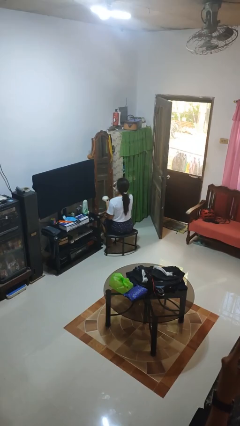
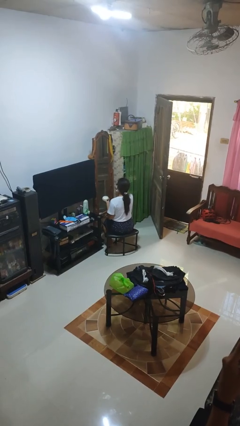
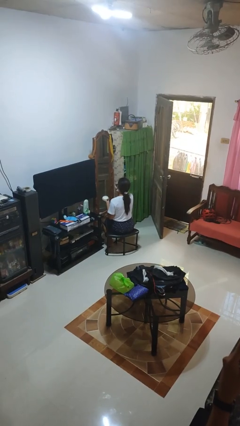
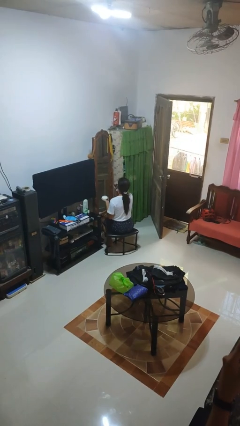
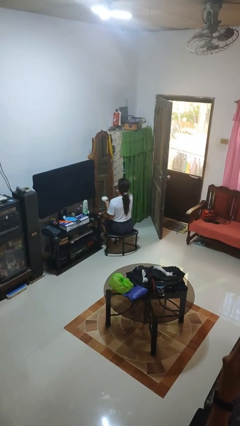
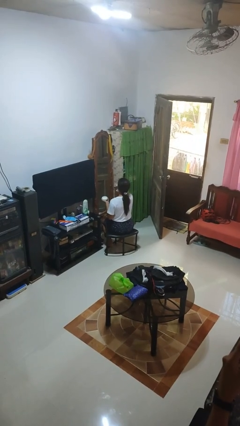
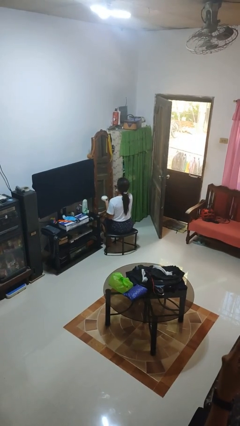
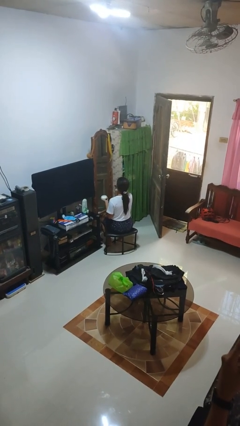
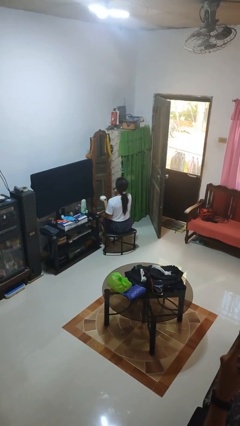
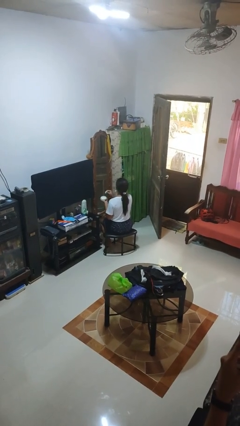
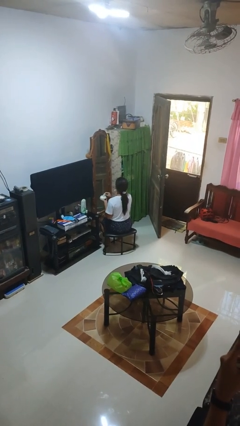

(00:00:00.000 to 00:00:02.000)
person applies foundation makeup

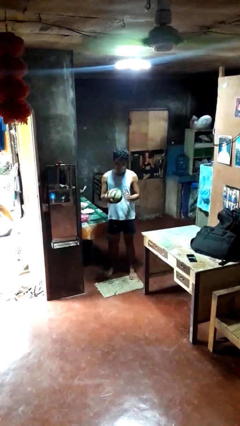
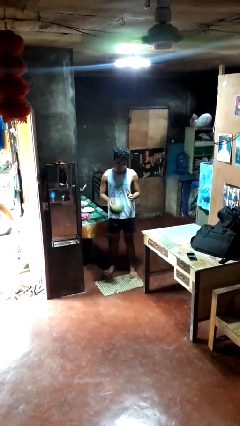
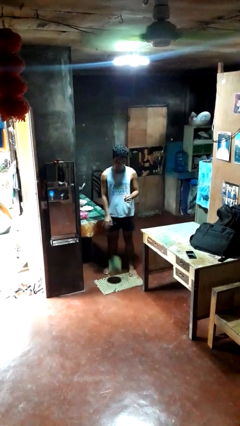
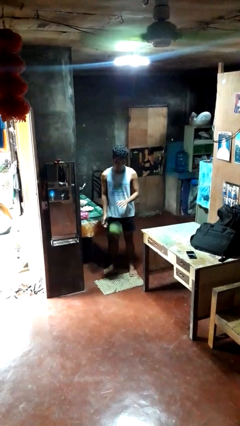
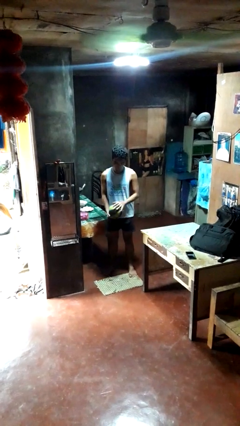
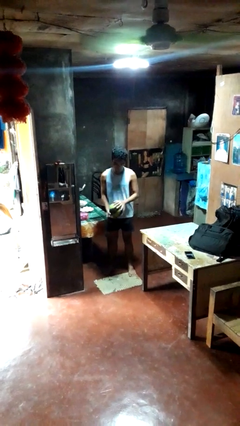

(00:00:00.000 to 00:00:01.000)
person bounces ball on floor

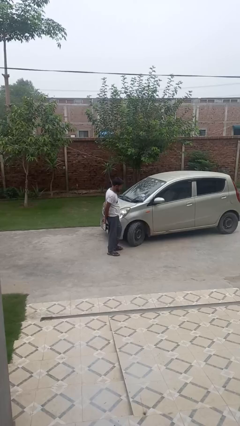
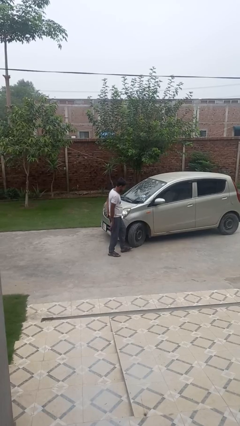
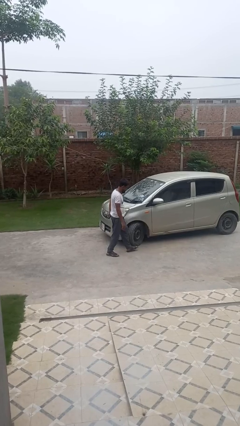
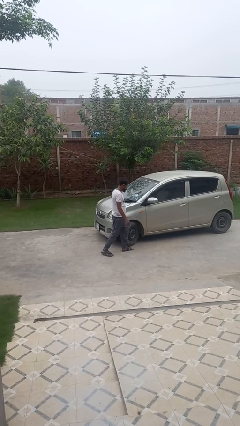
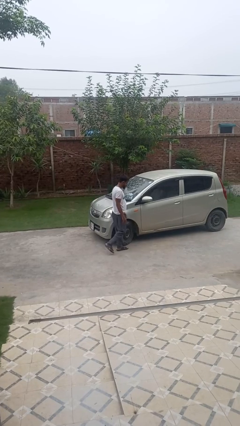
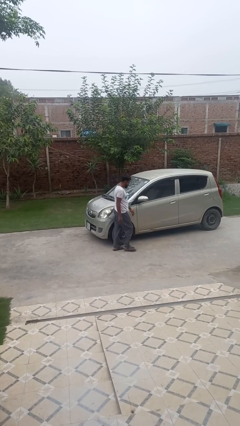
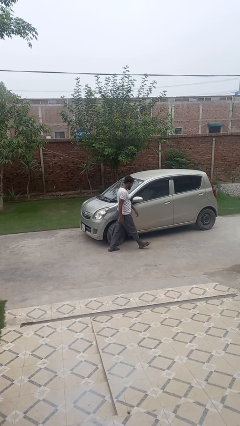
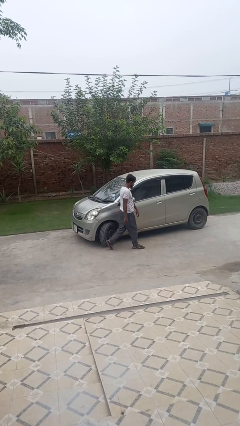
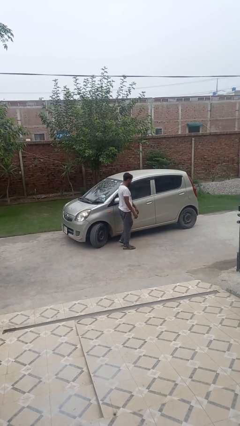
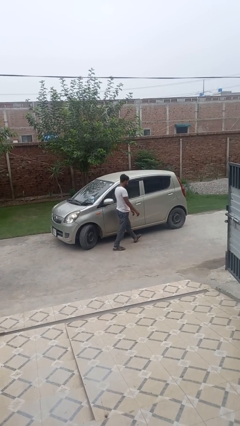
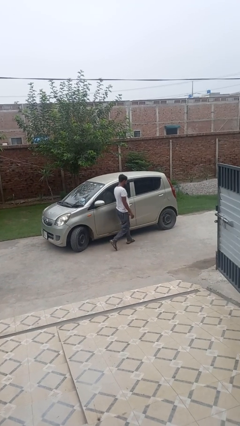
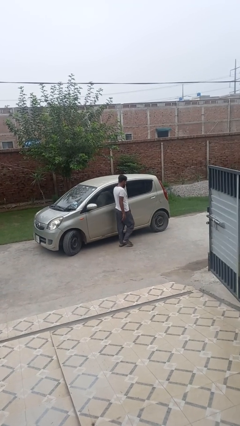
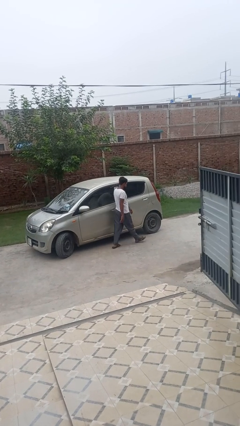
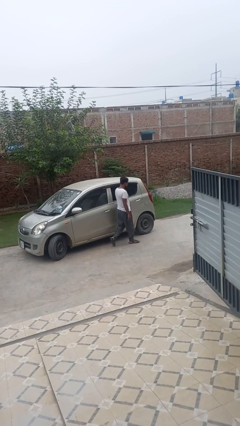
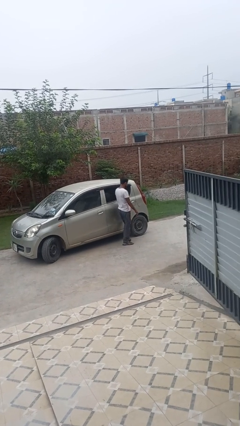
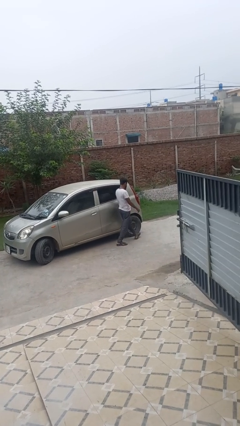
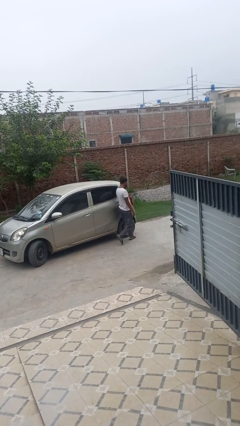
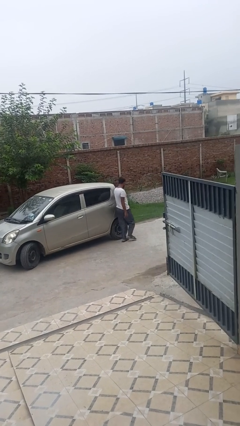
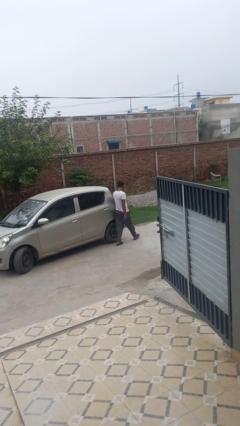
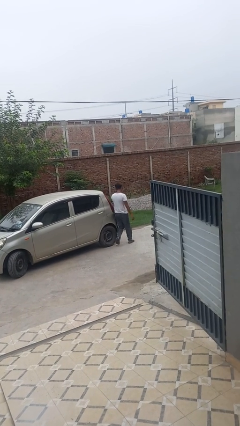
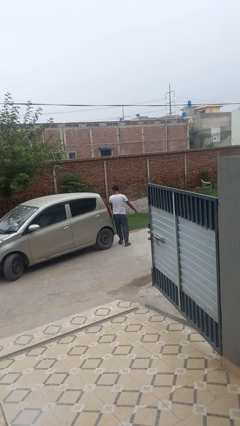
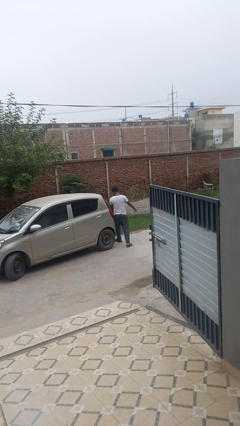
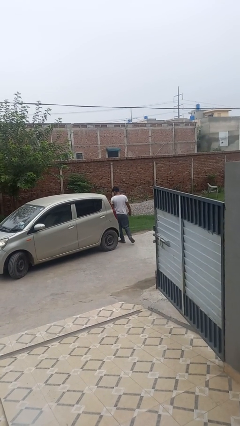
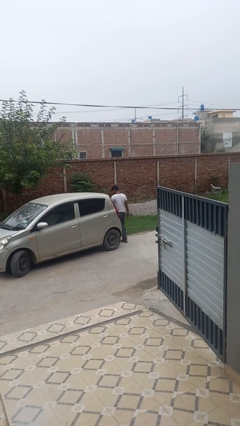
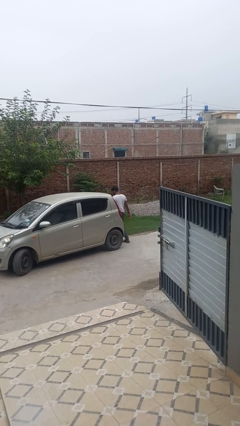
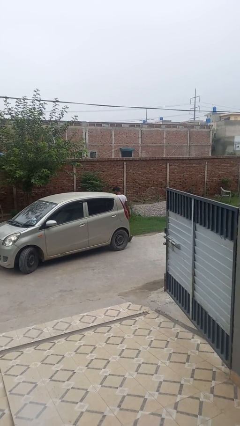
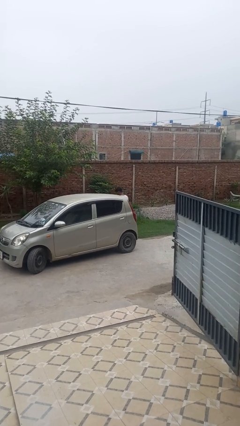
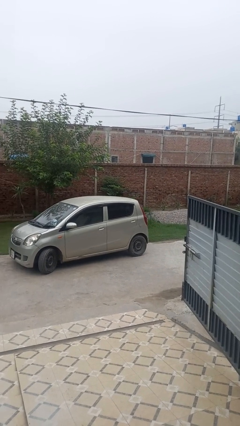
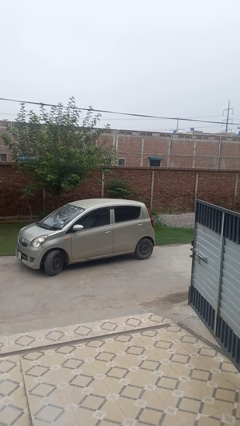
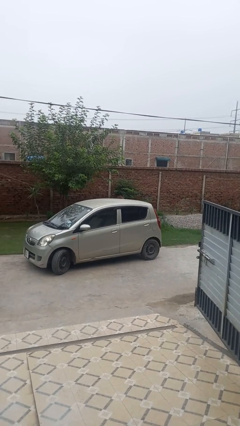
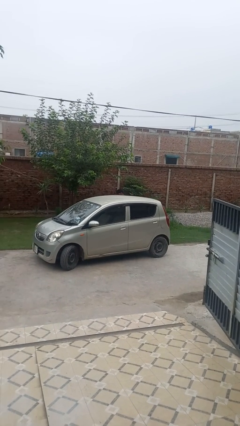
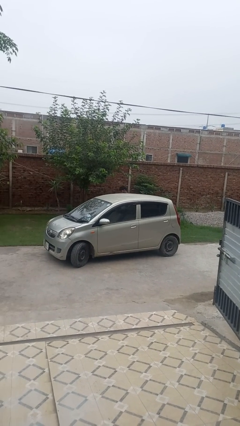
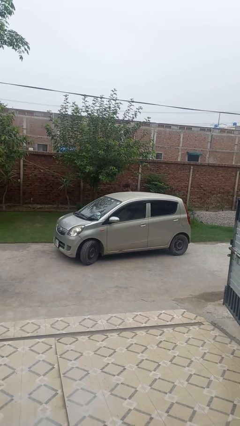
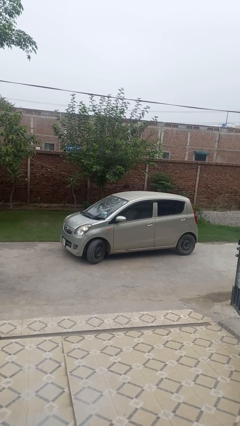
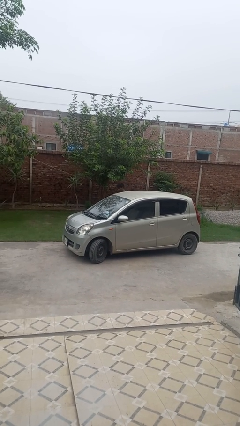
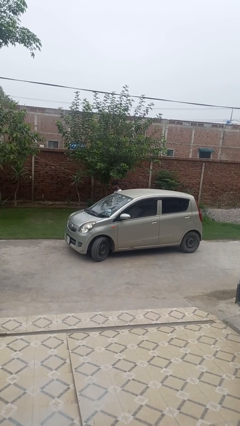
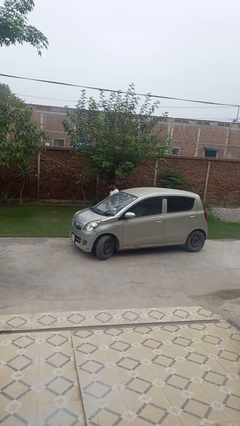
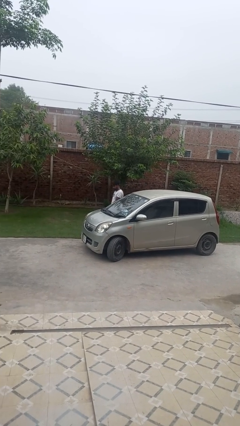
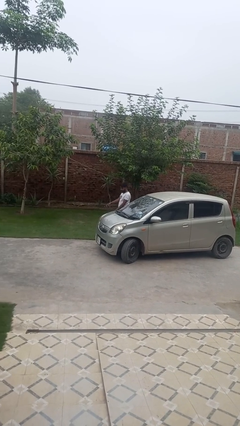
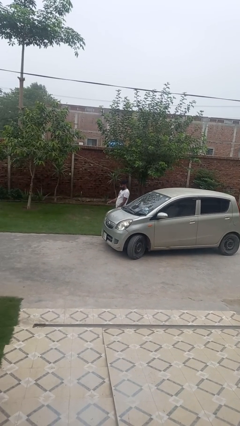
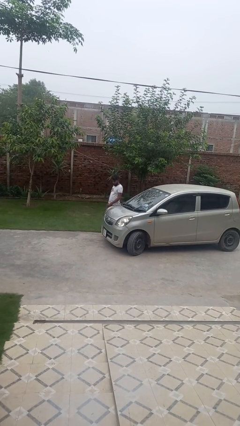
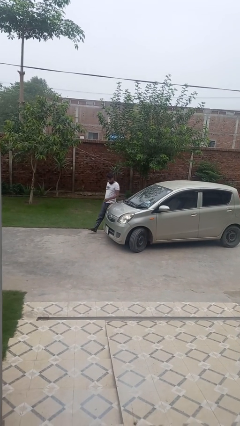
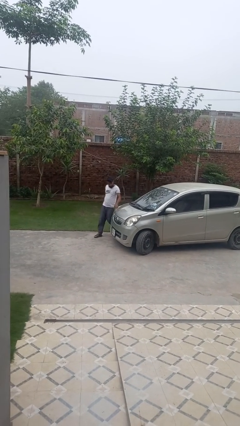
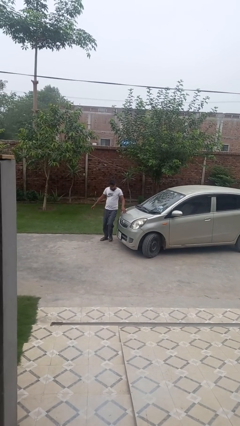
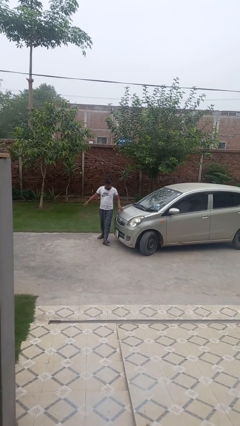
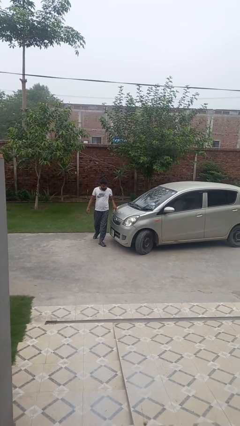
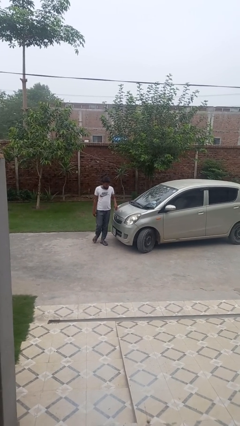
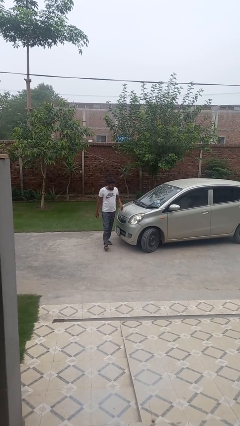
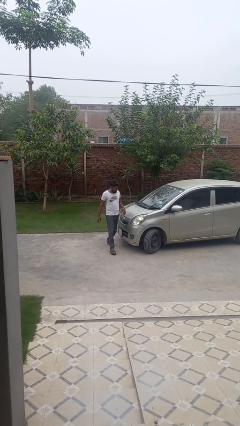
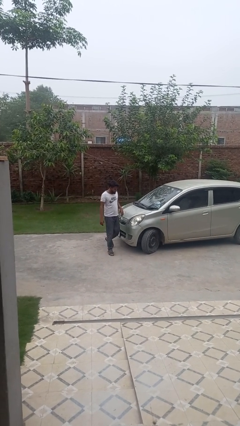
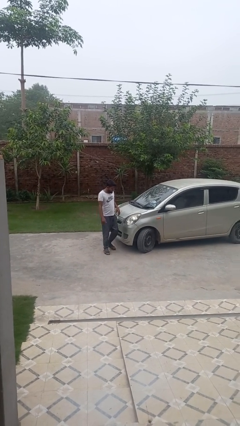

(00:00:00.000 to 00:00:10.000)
person walks around car

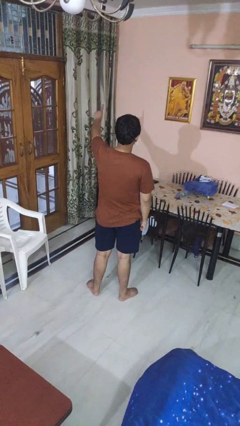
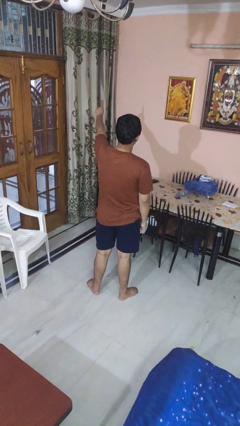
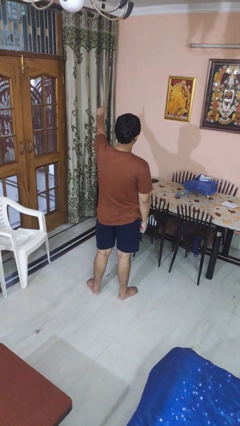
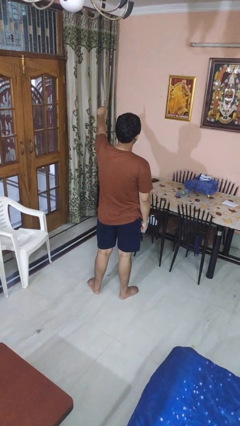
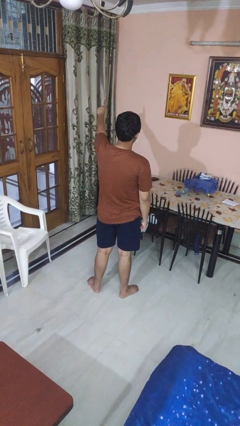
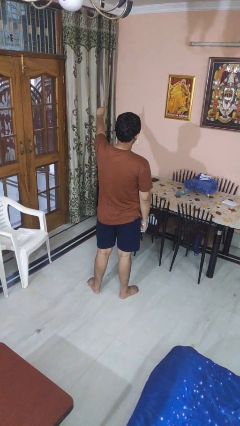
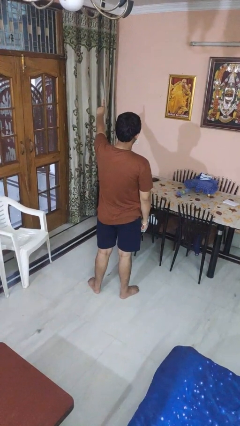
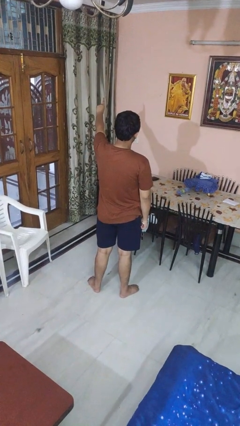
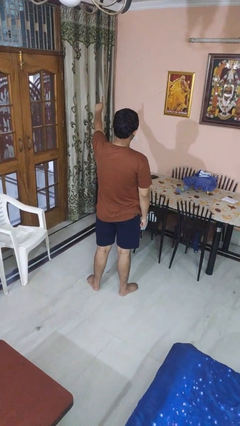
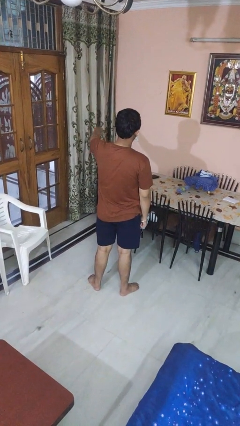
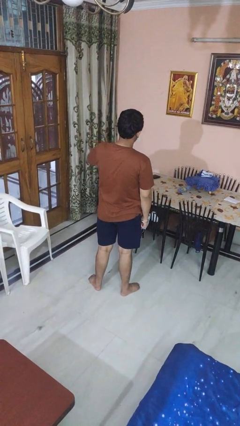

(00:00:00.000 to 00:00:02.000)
person gestures number one

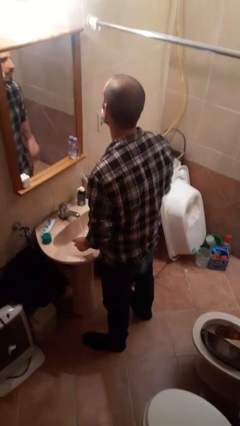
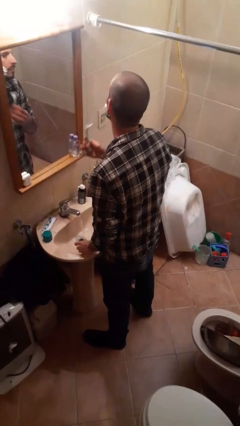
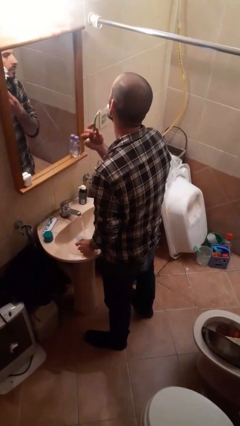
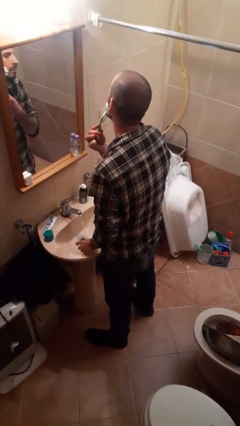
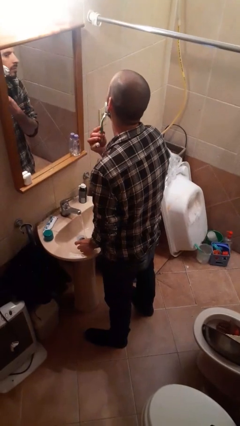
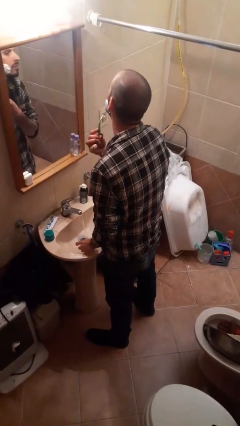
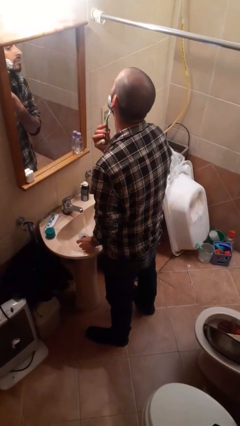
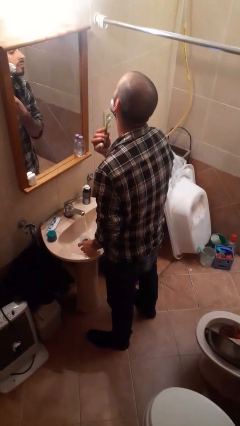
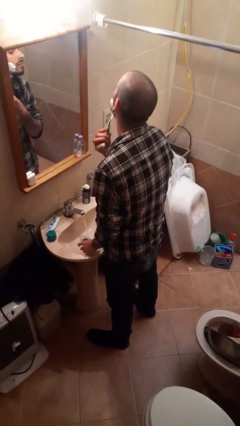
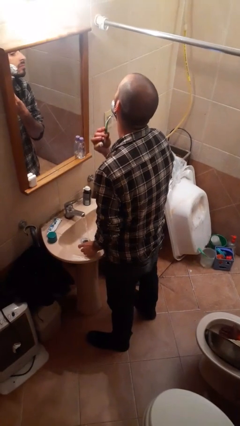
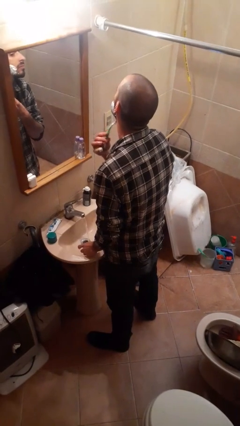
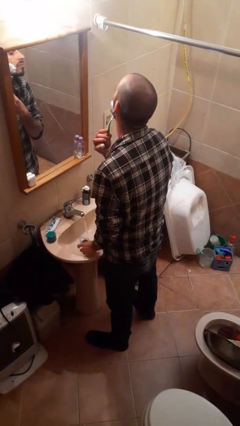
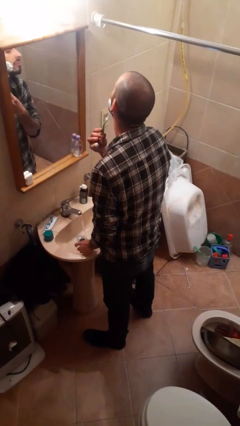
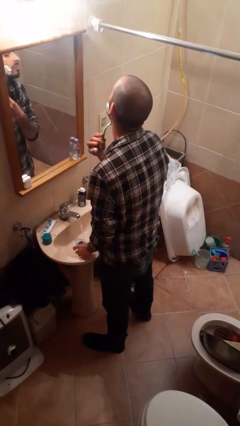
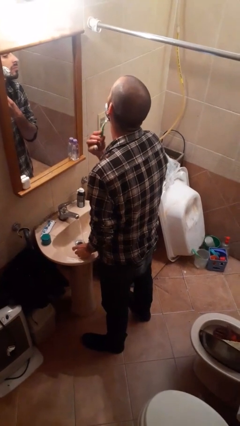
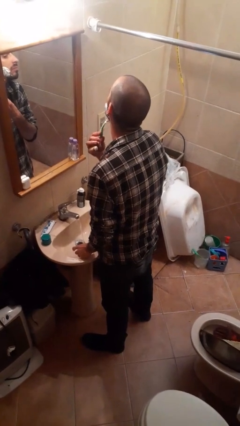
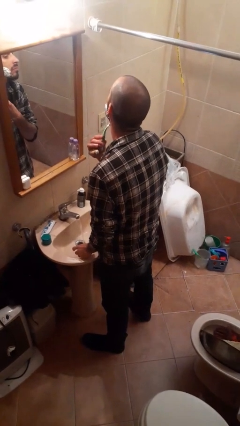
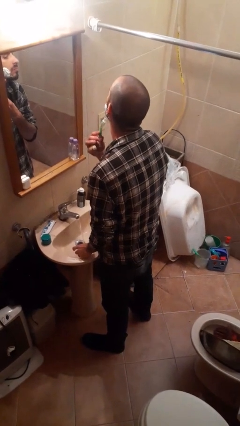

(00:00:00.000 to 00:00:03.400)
person shaves face
